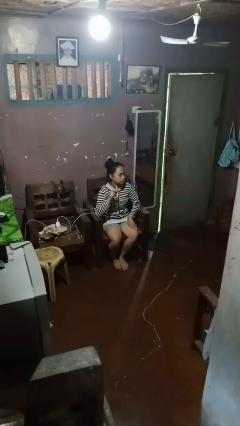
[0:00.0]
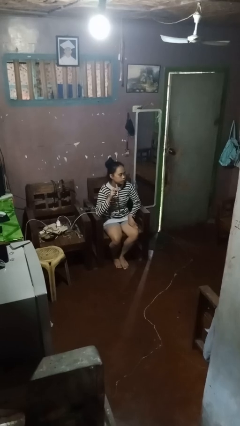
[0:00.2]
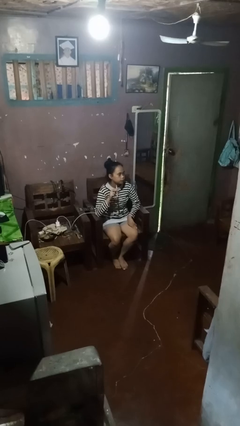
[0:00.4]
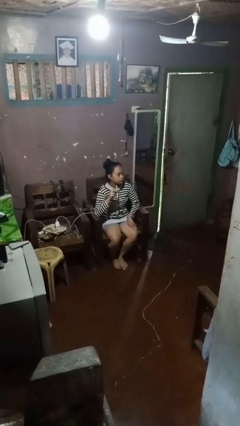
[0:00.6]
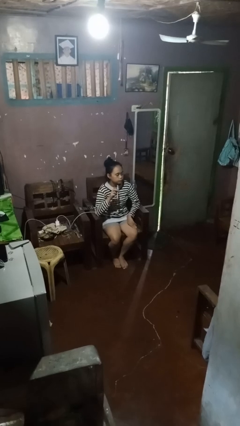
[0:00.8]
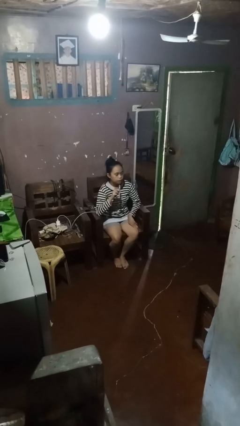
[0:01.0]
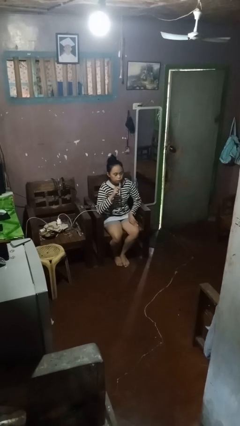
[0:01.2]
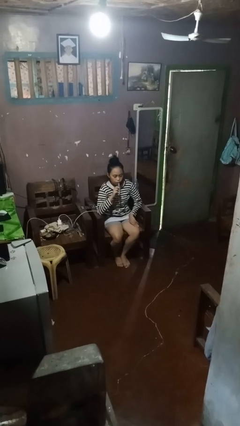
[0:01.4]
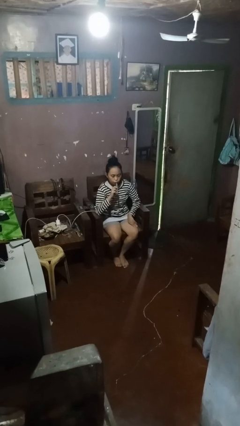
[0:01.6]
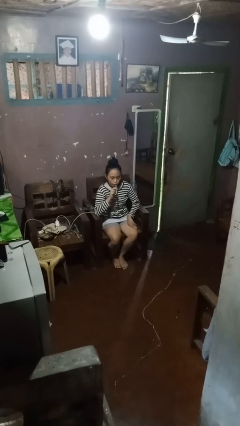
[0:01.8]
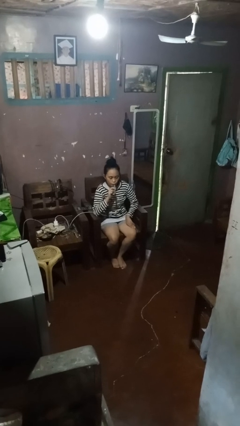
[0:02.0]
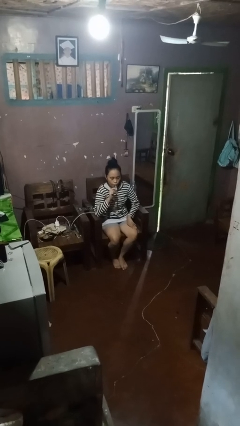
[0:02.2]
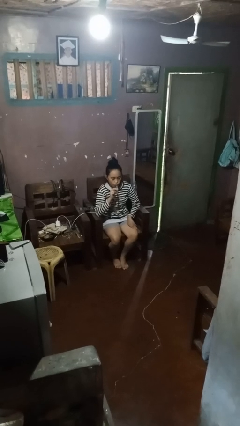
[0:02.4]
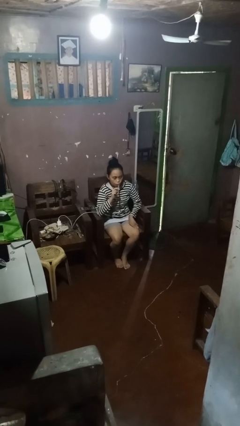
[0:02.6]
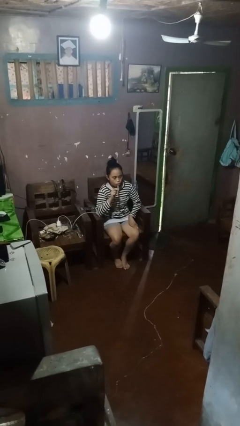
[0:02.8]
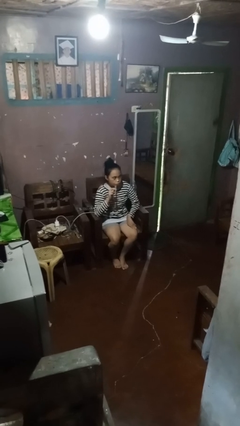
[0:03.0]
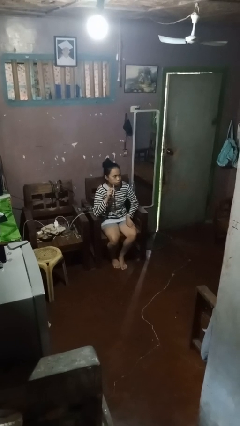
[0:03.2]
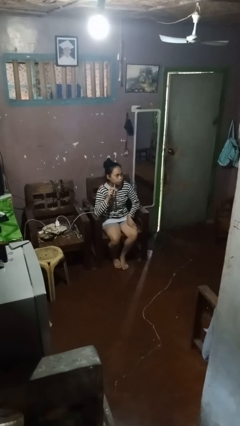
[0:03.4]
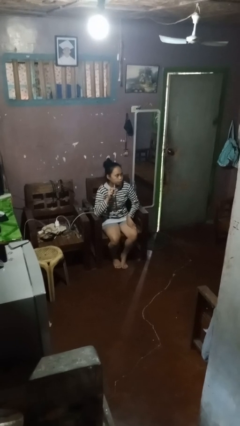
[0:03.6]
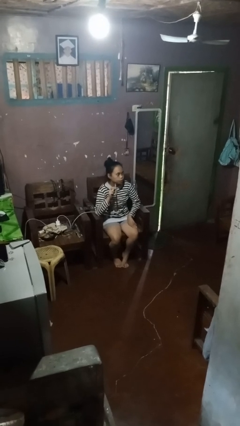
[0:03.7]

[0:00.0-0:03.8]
person vapes

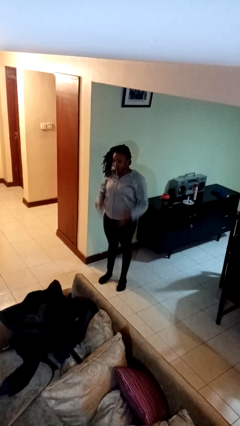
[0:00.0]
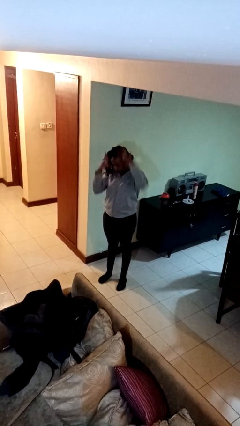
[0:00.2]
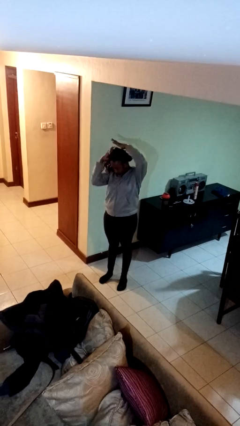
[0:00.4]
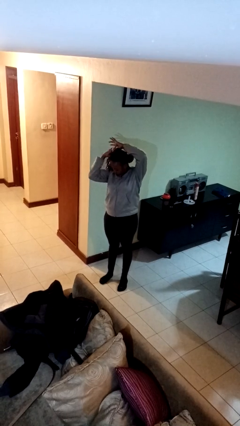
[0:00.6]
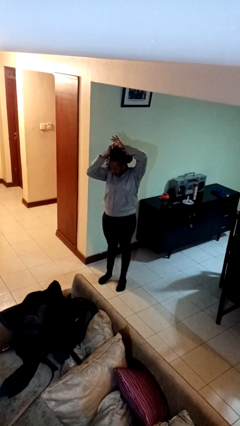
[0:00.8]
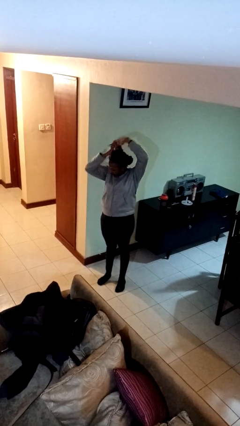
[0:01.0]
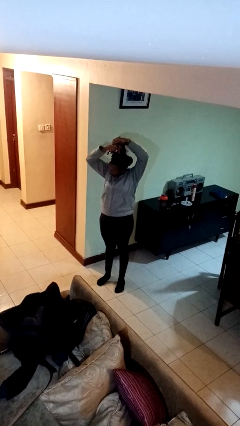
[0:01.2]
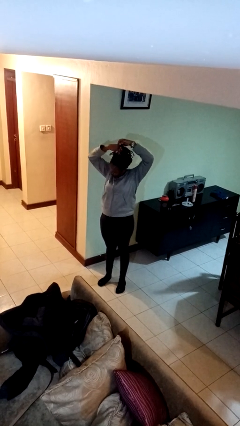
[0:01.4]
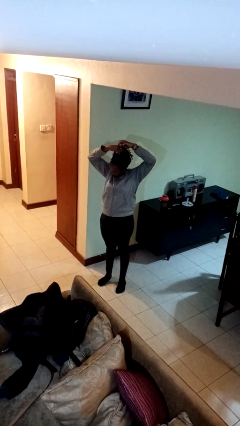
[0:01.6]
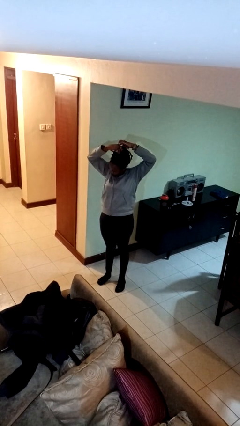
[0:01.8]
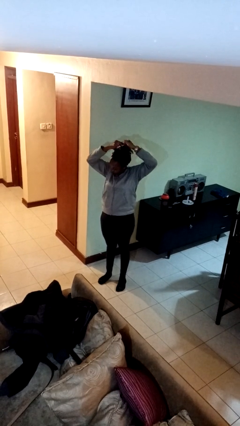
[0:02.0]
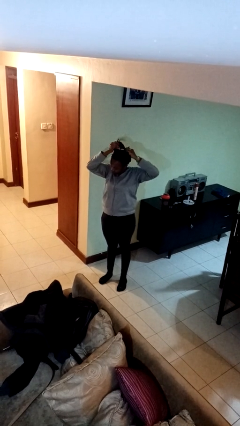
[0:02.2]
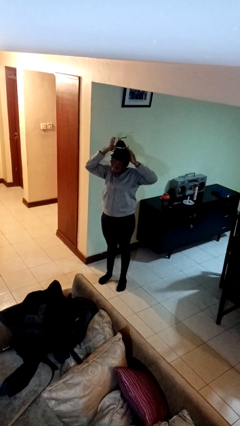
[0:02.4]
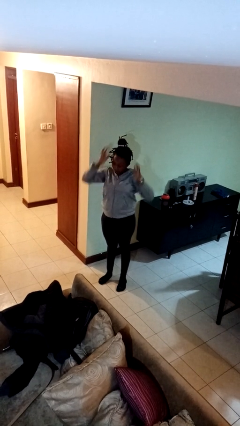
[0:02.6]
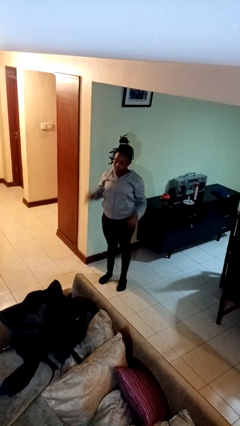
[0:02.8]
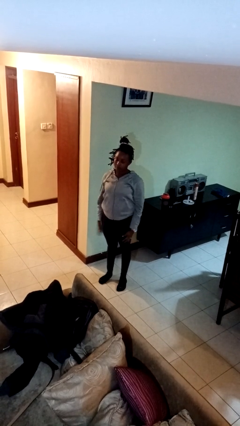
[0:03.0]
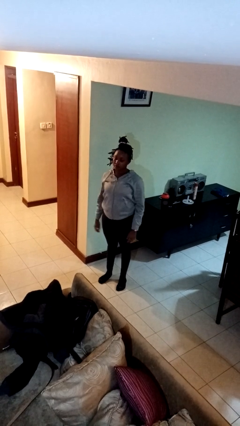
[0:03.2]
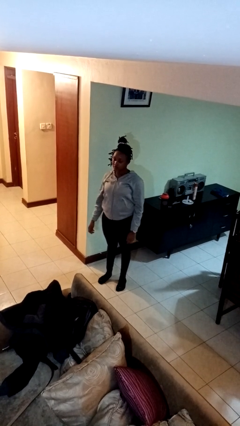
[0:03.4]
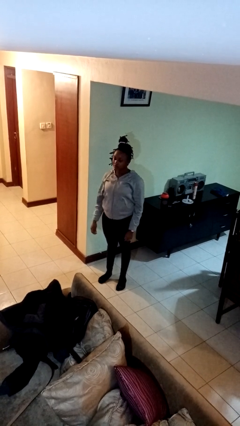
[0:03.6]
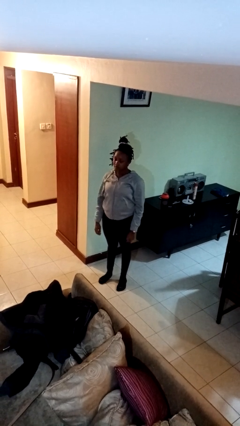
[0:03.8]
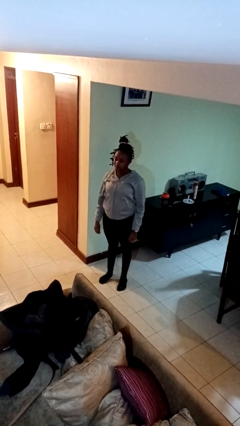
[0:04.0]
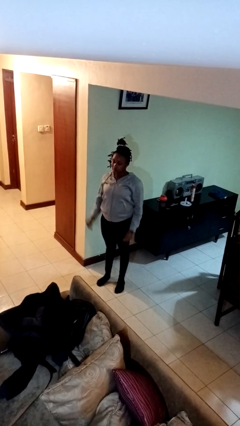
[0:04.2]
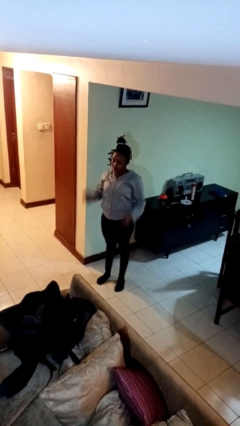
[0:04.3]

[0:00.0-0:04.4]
person puts hair in ponytail

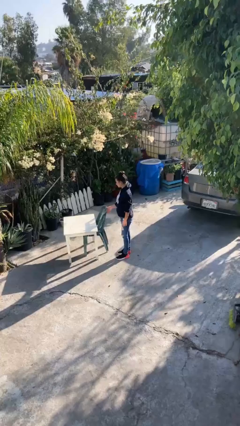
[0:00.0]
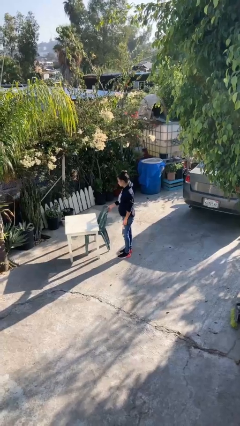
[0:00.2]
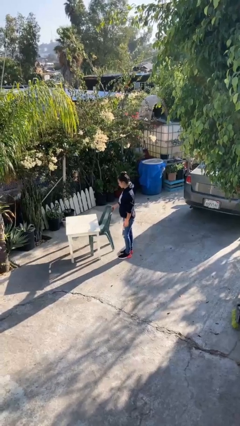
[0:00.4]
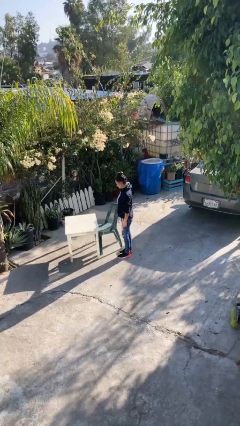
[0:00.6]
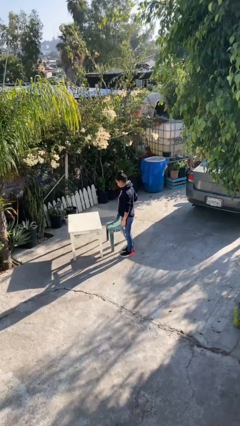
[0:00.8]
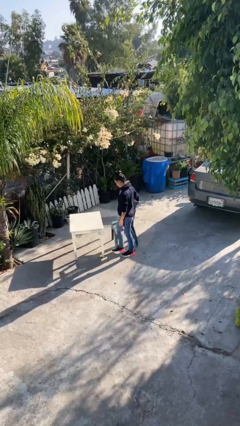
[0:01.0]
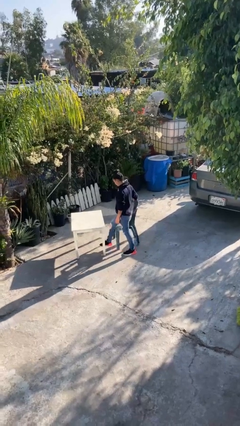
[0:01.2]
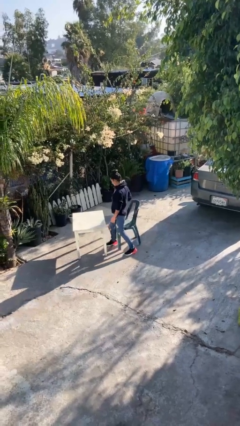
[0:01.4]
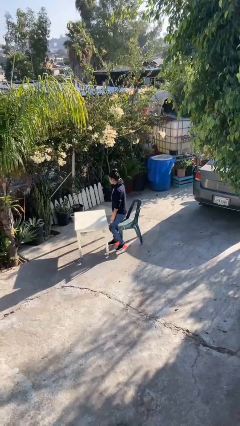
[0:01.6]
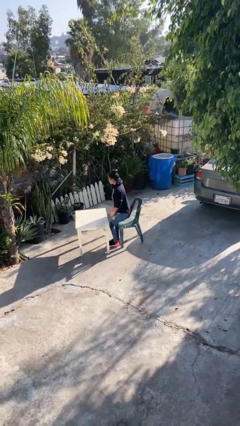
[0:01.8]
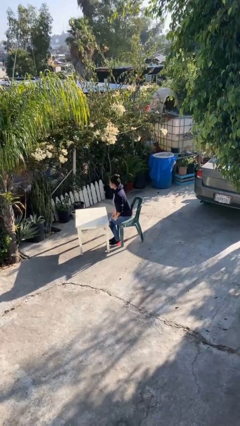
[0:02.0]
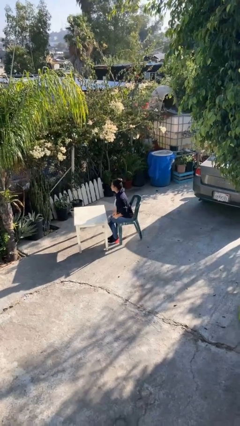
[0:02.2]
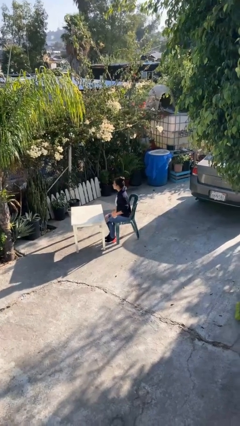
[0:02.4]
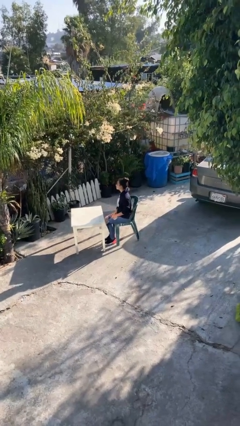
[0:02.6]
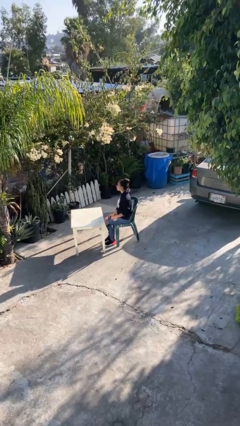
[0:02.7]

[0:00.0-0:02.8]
person sits down

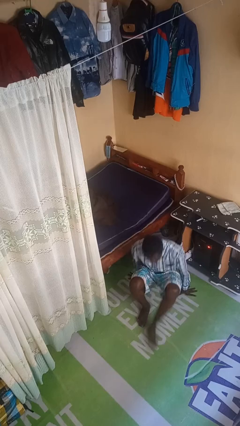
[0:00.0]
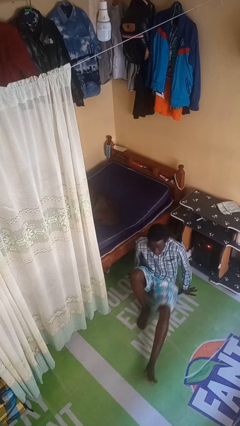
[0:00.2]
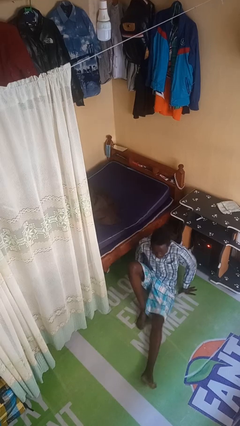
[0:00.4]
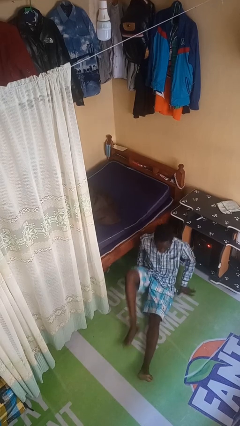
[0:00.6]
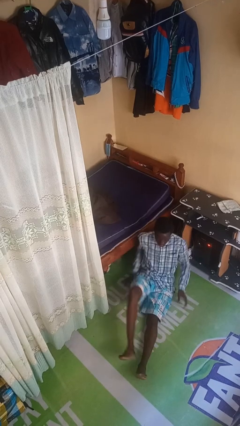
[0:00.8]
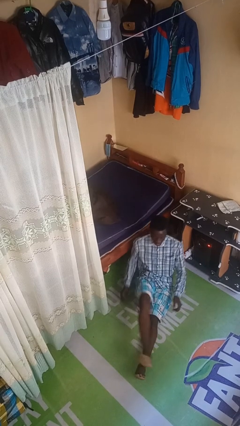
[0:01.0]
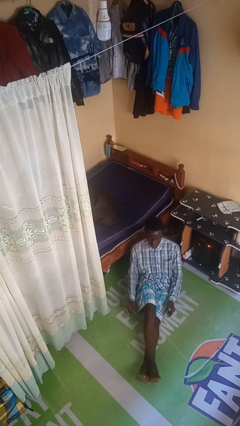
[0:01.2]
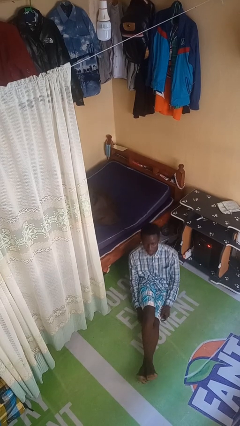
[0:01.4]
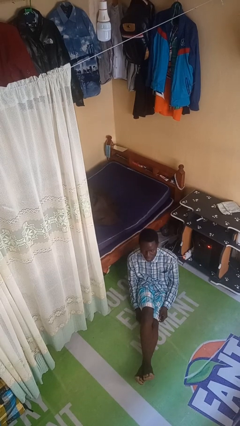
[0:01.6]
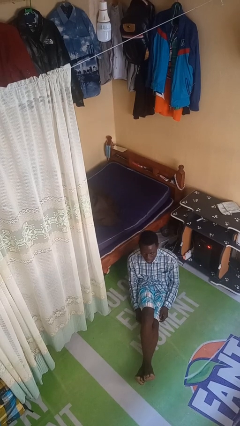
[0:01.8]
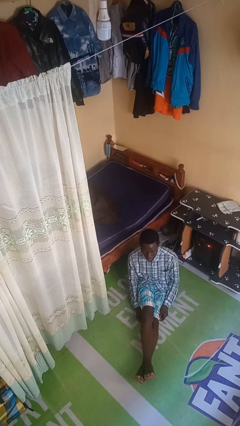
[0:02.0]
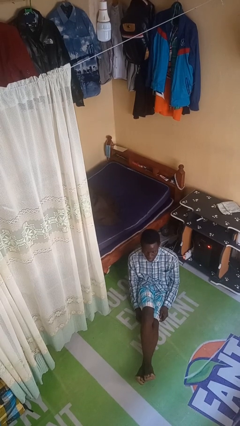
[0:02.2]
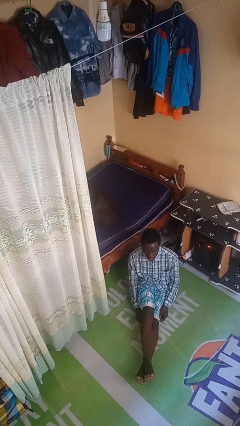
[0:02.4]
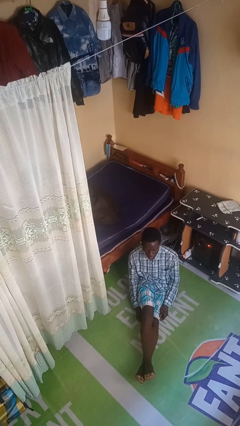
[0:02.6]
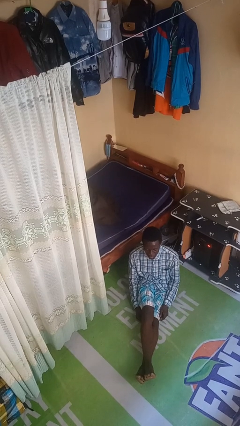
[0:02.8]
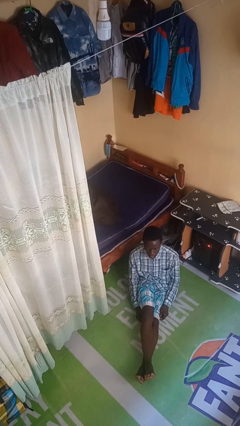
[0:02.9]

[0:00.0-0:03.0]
person sits crisscross

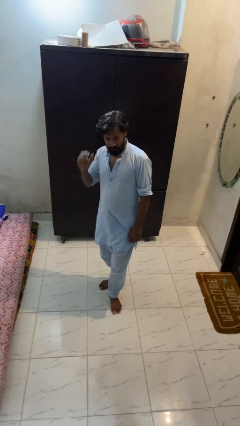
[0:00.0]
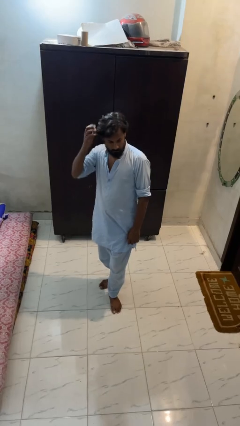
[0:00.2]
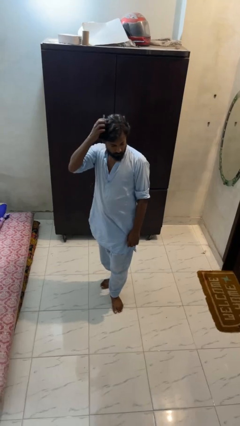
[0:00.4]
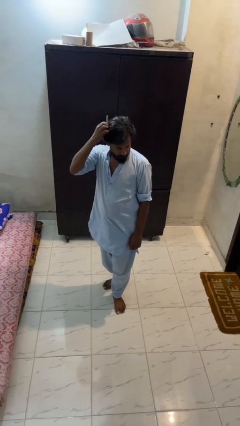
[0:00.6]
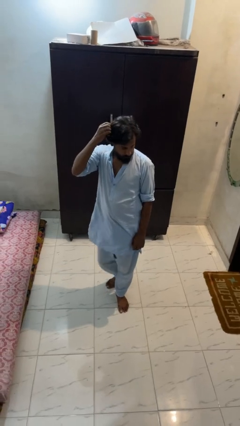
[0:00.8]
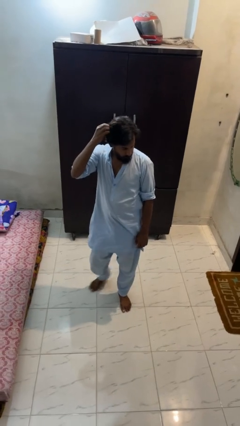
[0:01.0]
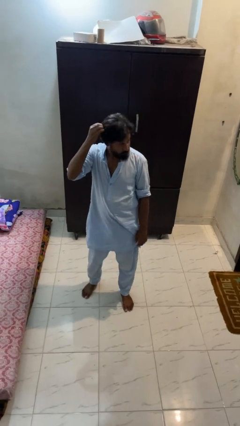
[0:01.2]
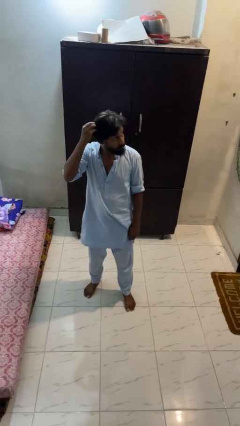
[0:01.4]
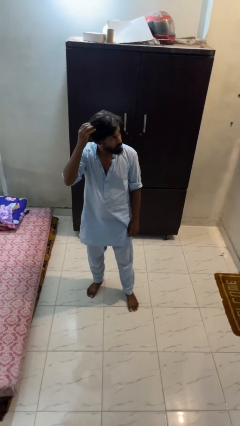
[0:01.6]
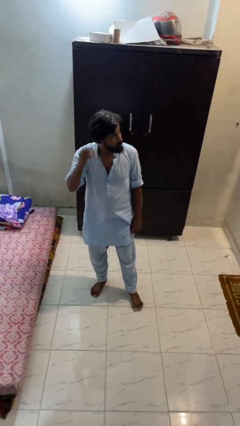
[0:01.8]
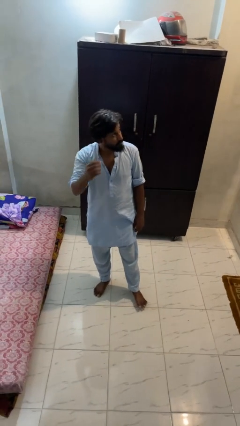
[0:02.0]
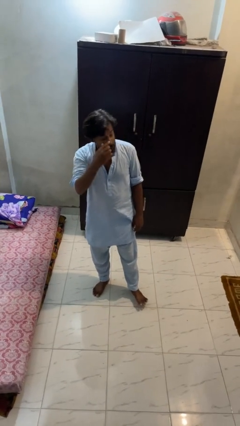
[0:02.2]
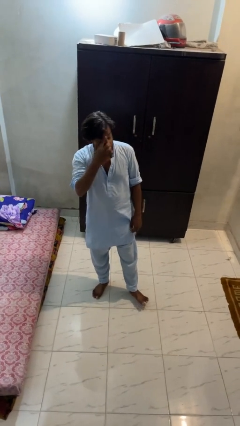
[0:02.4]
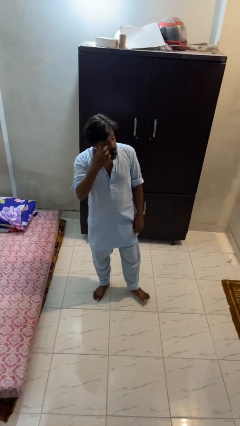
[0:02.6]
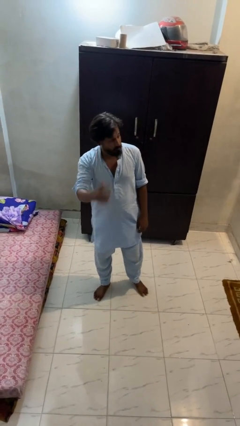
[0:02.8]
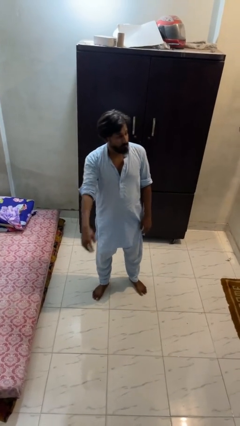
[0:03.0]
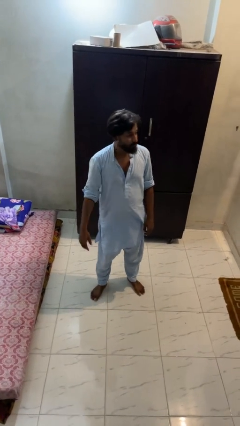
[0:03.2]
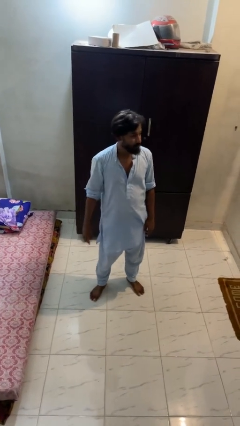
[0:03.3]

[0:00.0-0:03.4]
person scratches face
